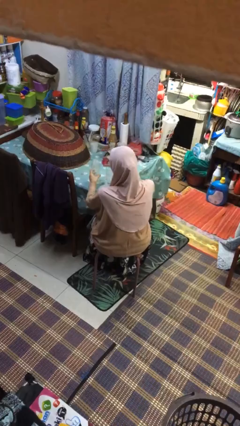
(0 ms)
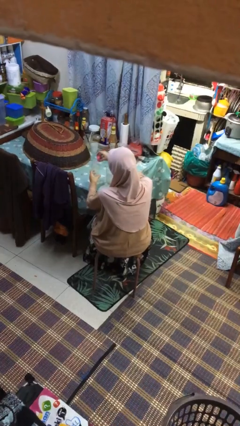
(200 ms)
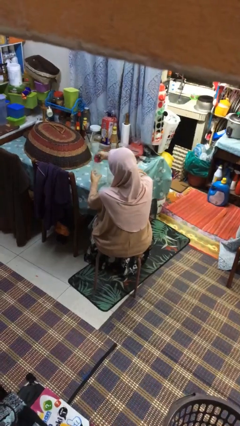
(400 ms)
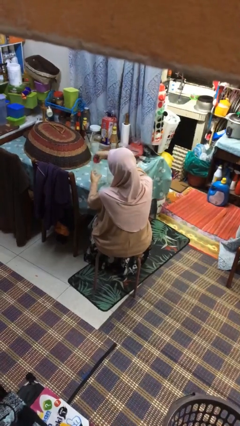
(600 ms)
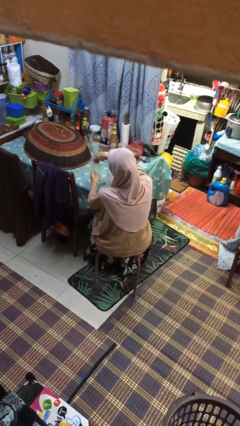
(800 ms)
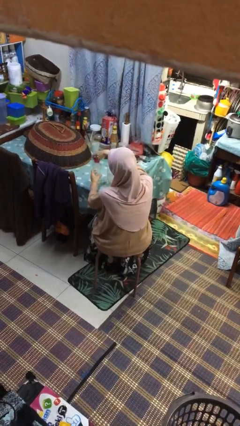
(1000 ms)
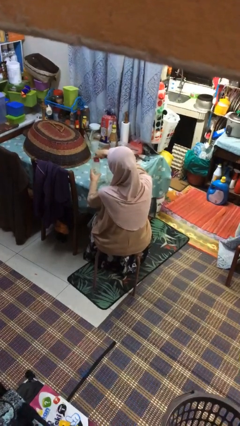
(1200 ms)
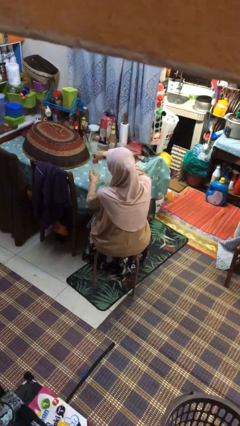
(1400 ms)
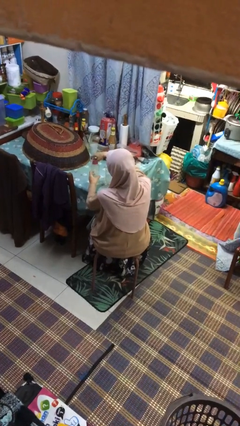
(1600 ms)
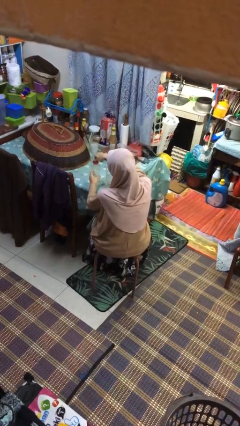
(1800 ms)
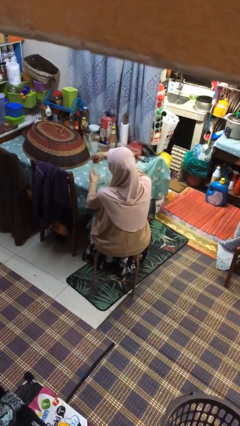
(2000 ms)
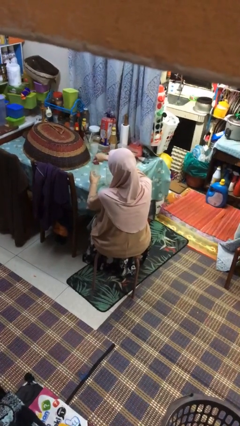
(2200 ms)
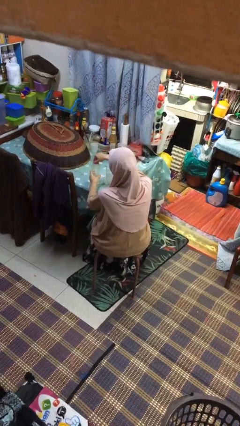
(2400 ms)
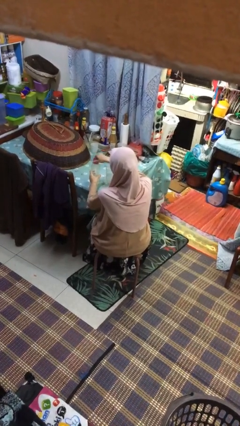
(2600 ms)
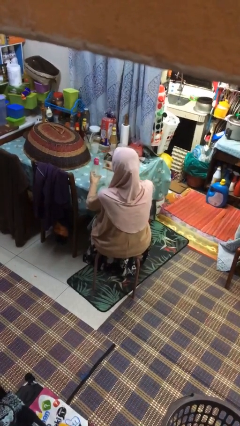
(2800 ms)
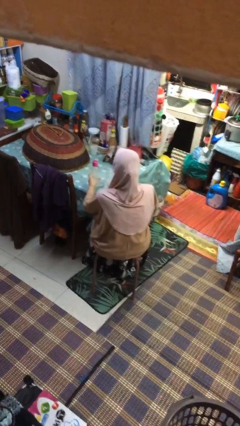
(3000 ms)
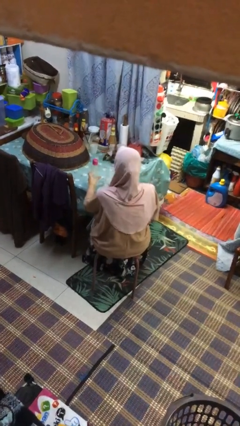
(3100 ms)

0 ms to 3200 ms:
person screws lid to bottle

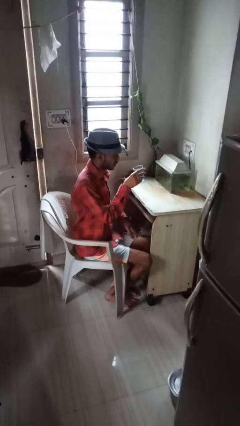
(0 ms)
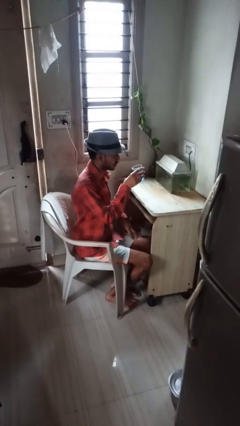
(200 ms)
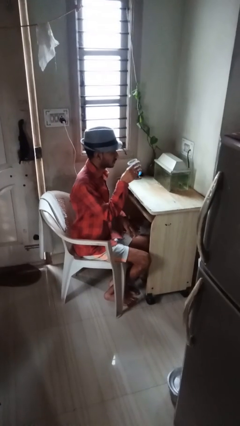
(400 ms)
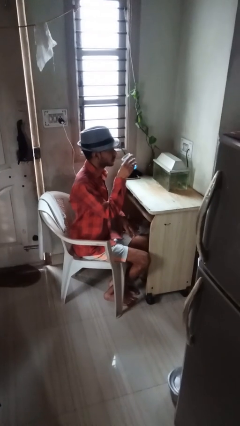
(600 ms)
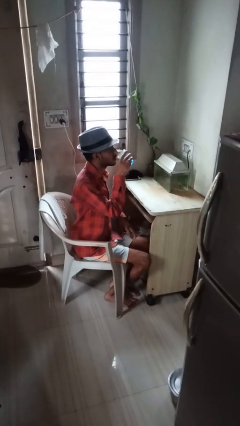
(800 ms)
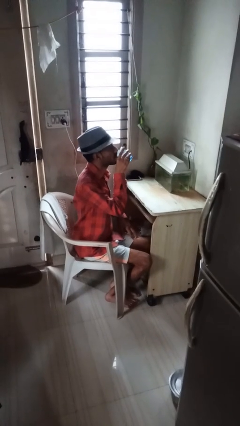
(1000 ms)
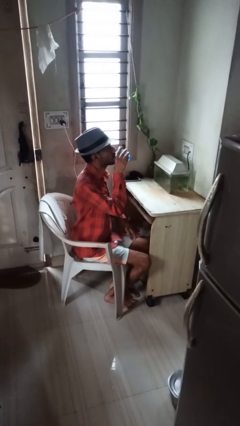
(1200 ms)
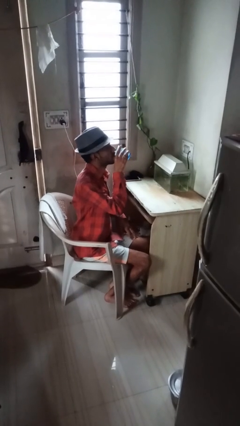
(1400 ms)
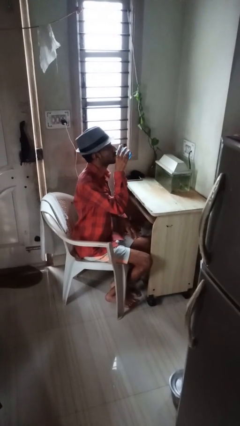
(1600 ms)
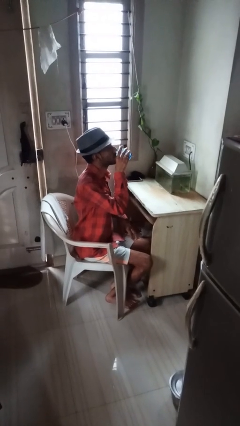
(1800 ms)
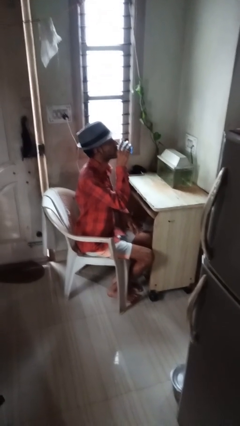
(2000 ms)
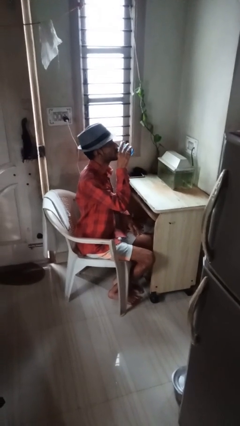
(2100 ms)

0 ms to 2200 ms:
person drinks from shotglass

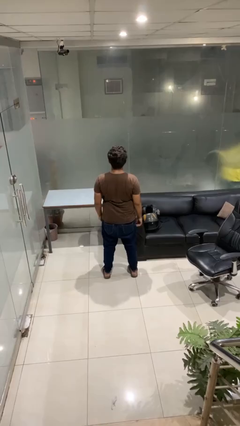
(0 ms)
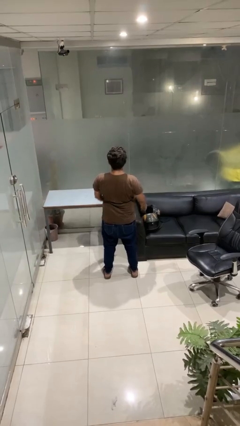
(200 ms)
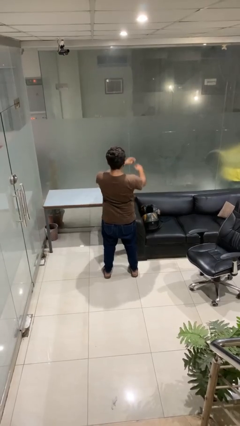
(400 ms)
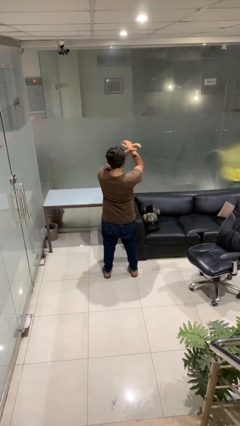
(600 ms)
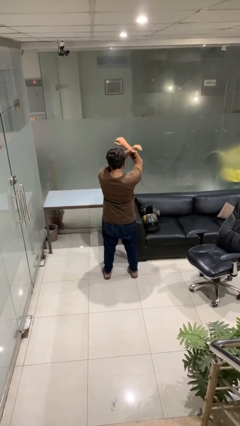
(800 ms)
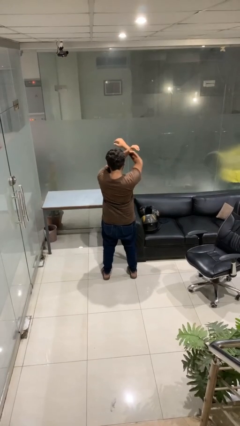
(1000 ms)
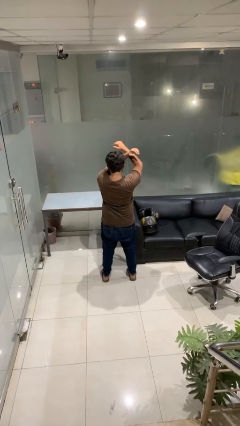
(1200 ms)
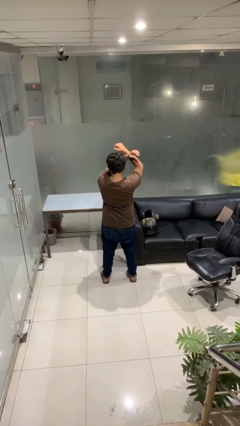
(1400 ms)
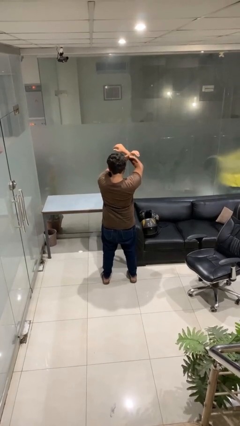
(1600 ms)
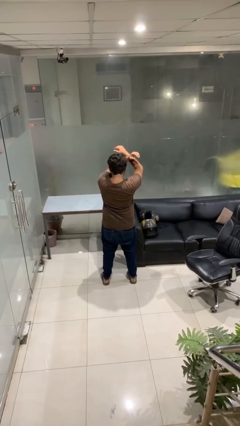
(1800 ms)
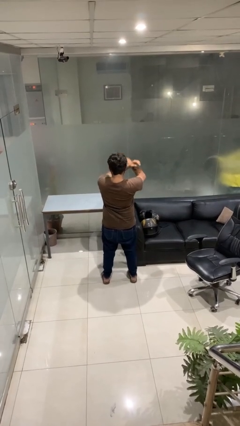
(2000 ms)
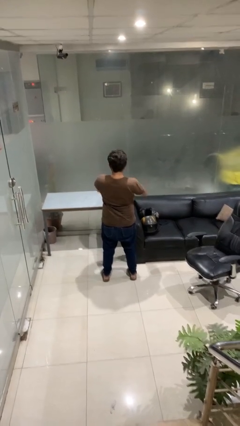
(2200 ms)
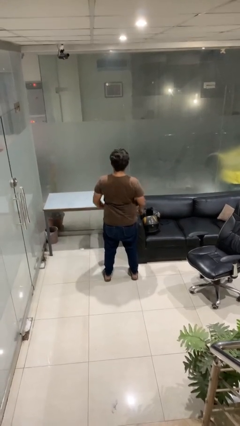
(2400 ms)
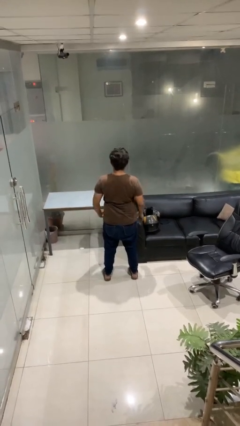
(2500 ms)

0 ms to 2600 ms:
person gestures arms x

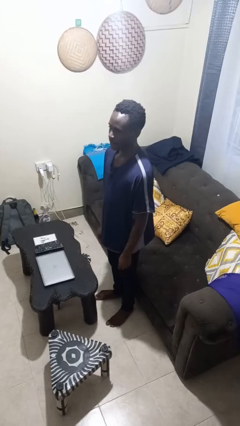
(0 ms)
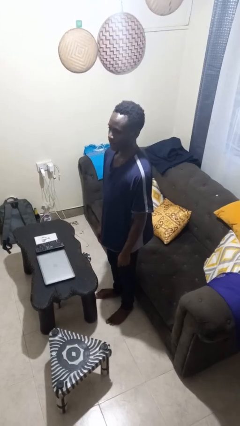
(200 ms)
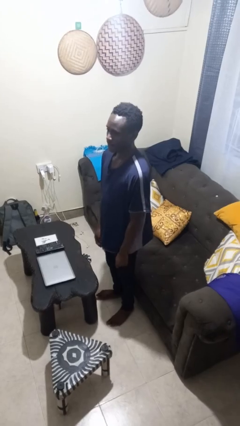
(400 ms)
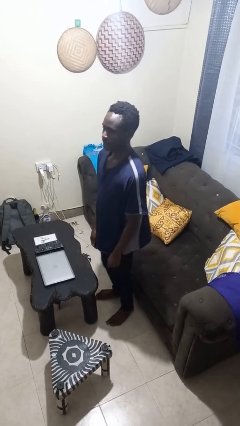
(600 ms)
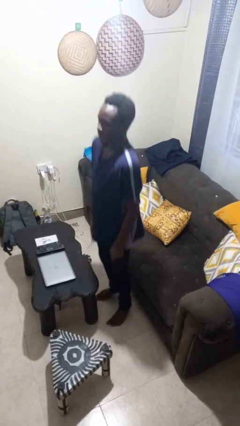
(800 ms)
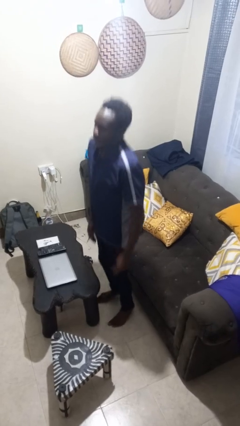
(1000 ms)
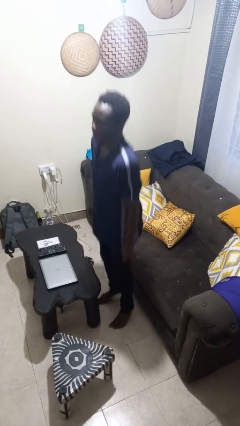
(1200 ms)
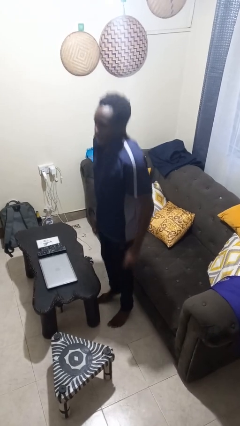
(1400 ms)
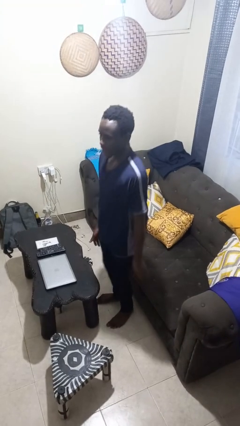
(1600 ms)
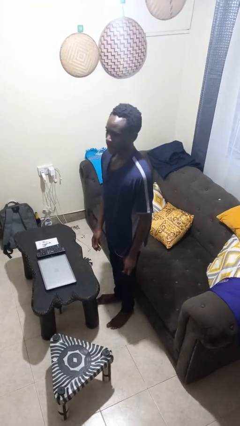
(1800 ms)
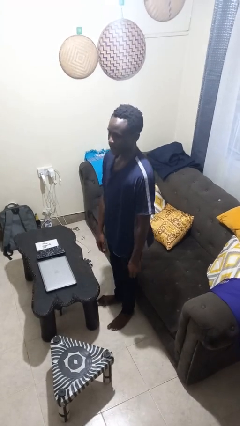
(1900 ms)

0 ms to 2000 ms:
person jumps

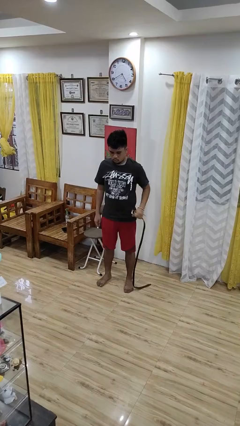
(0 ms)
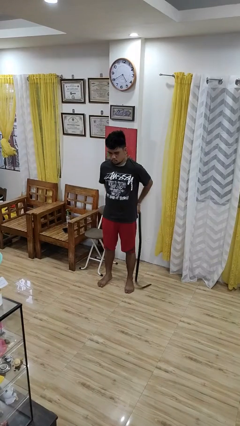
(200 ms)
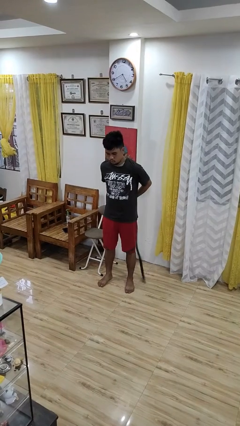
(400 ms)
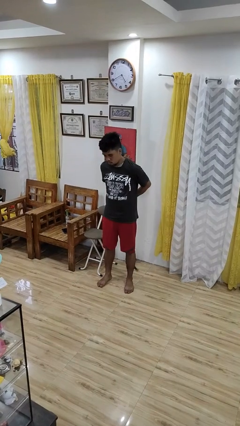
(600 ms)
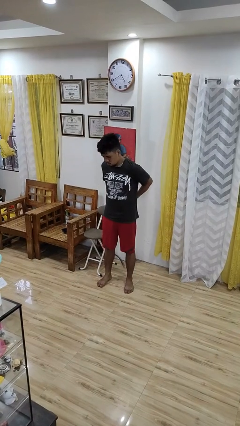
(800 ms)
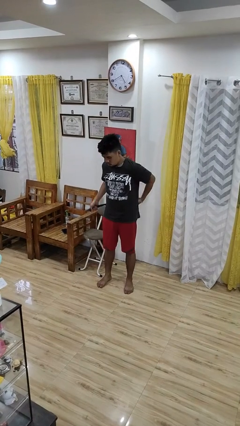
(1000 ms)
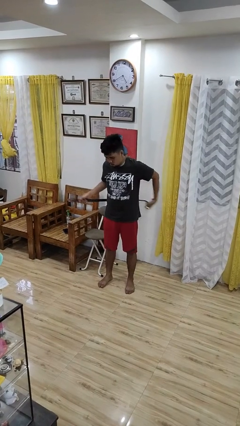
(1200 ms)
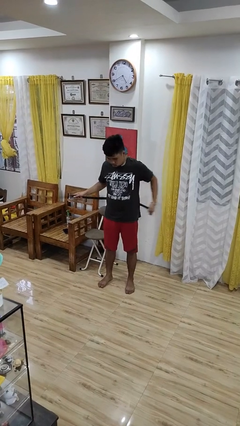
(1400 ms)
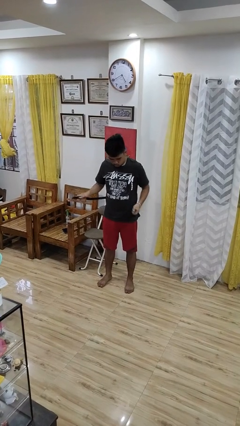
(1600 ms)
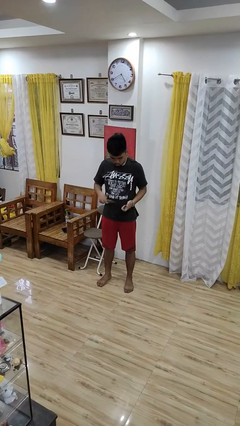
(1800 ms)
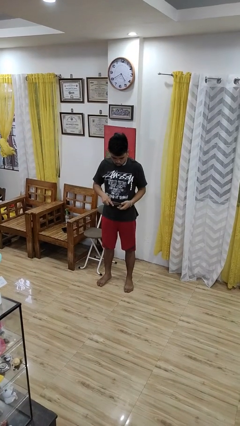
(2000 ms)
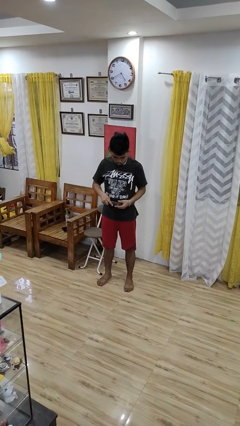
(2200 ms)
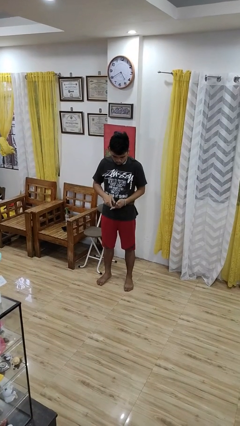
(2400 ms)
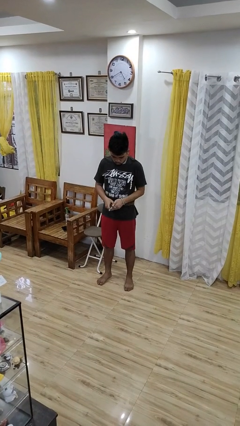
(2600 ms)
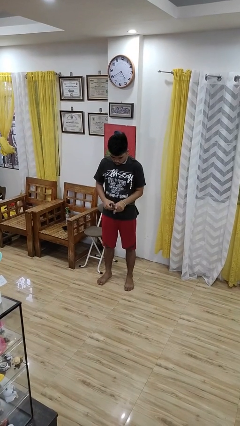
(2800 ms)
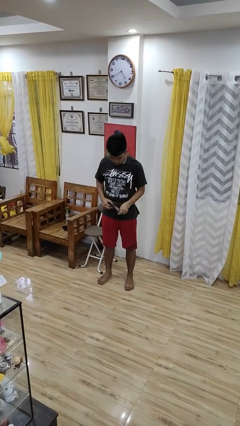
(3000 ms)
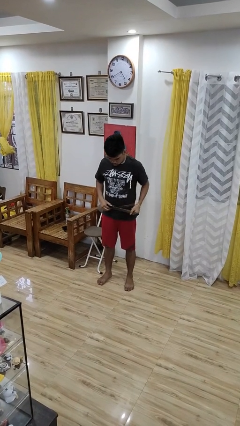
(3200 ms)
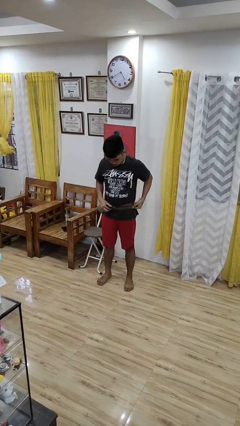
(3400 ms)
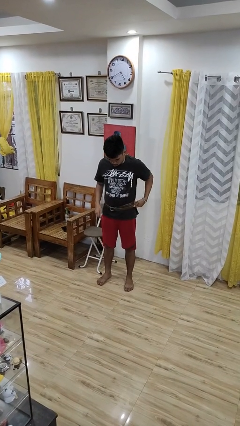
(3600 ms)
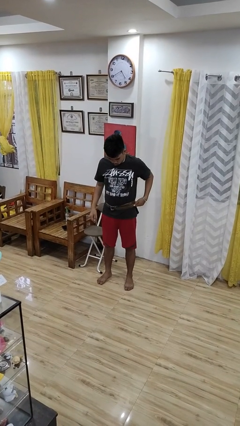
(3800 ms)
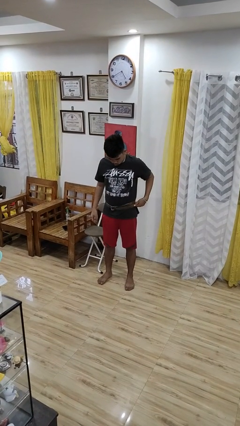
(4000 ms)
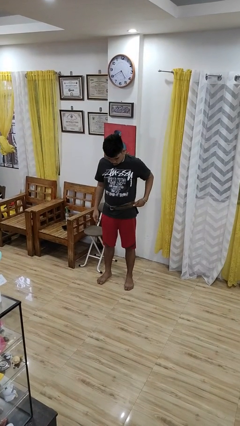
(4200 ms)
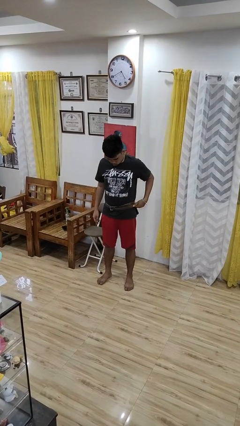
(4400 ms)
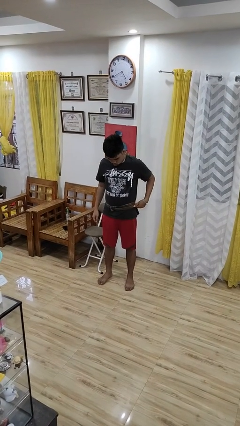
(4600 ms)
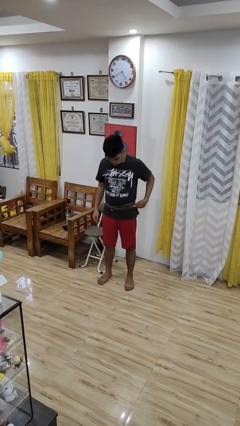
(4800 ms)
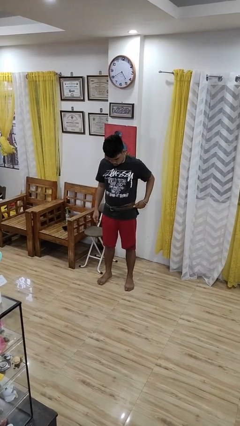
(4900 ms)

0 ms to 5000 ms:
person puts on belt

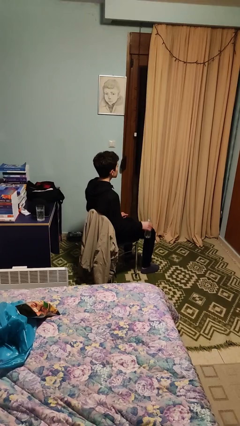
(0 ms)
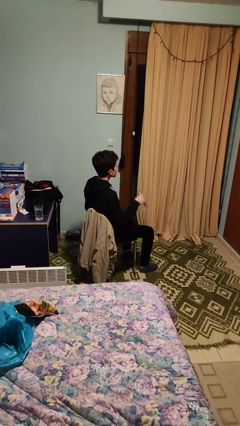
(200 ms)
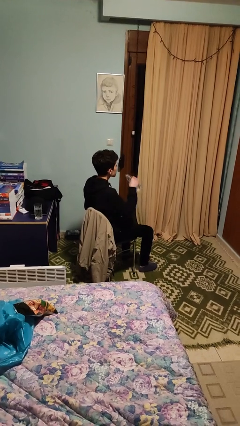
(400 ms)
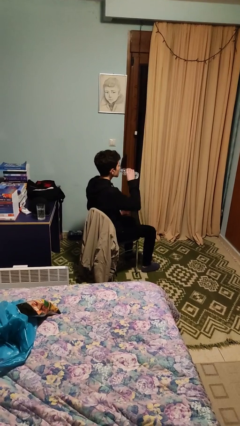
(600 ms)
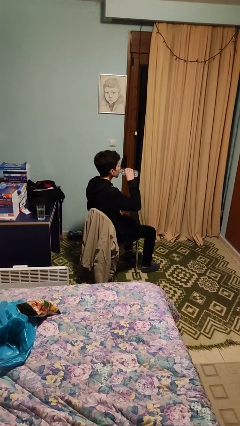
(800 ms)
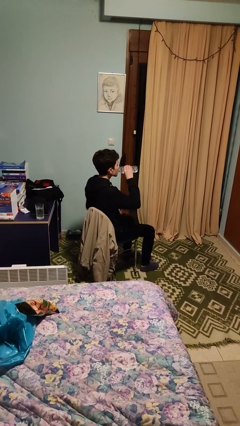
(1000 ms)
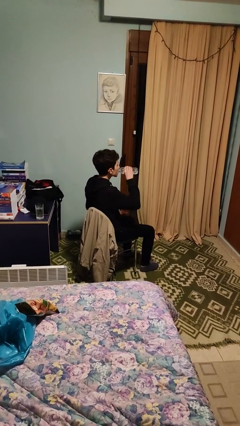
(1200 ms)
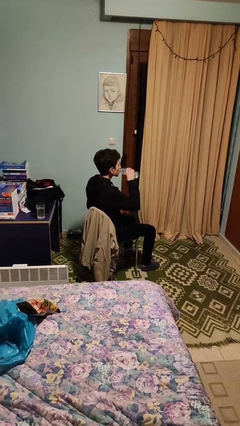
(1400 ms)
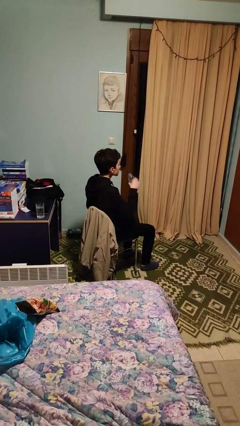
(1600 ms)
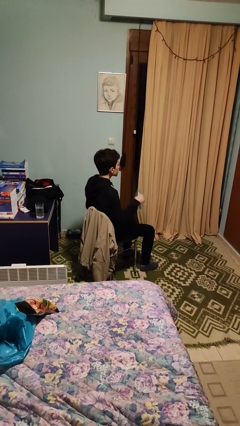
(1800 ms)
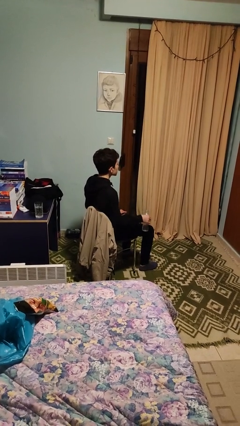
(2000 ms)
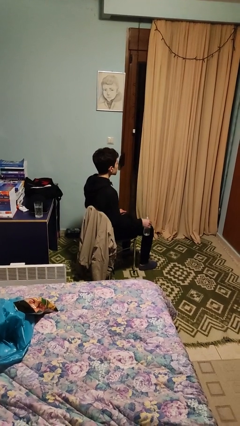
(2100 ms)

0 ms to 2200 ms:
person drinks from bottle
